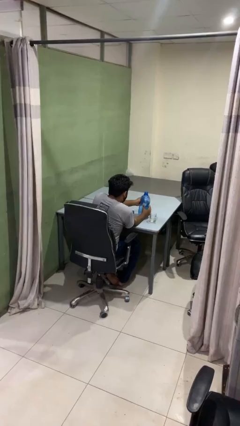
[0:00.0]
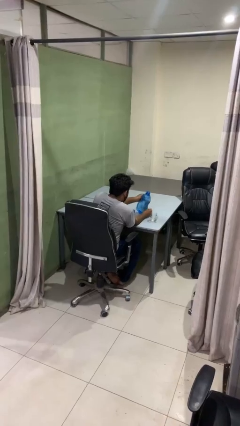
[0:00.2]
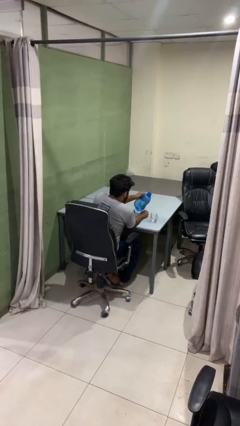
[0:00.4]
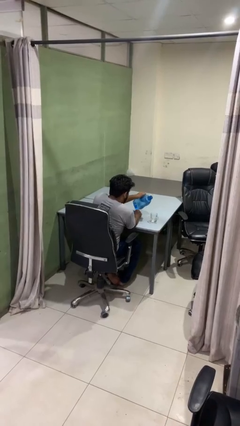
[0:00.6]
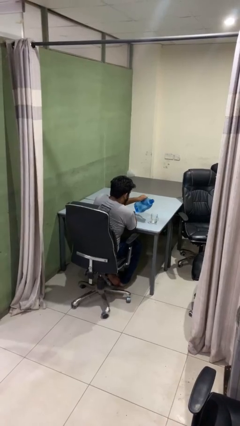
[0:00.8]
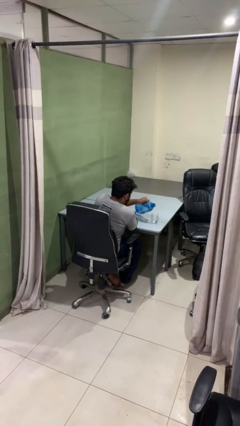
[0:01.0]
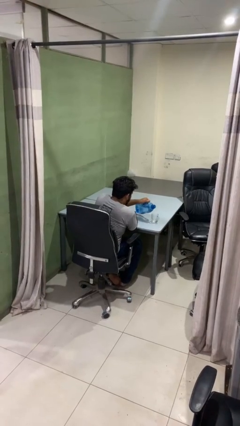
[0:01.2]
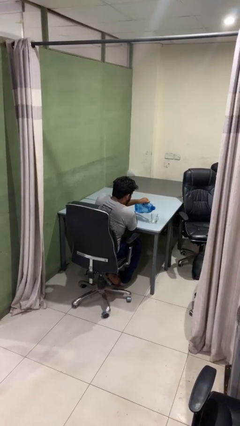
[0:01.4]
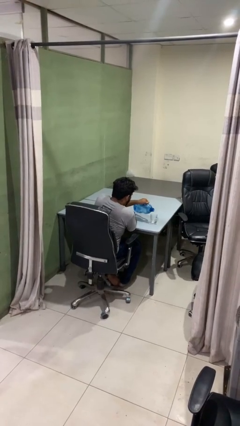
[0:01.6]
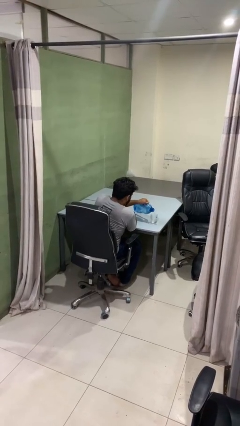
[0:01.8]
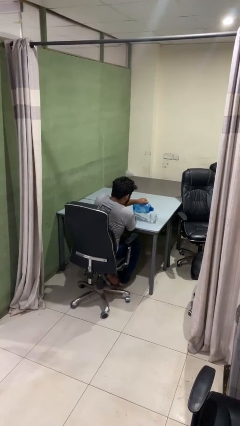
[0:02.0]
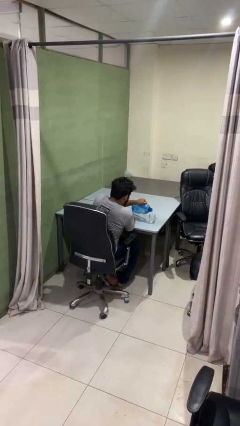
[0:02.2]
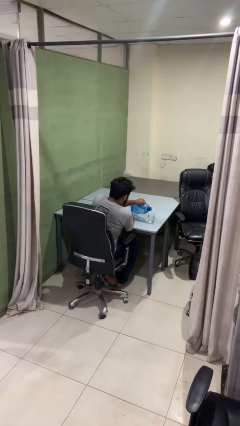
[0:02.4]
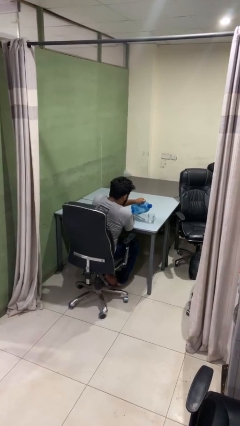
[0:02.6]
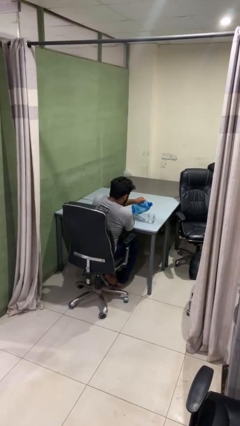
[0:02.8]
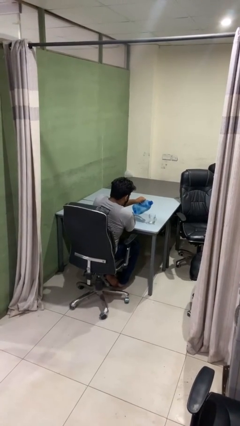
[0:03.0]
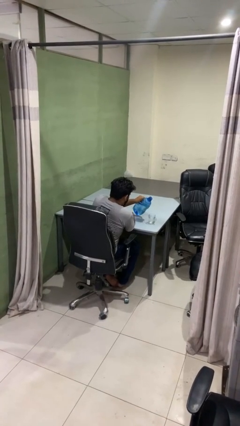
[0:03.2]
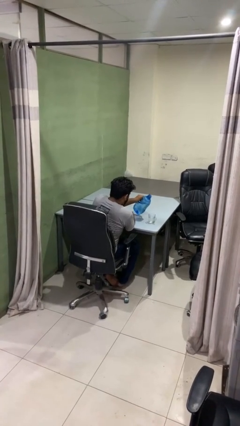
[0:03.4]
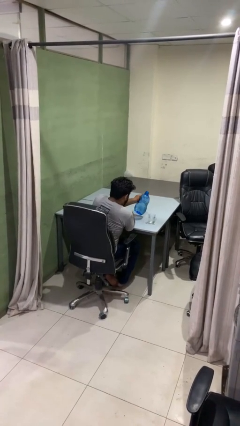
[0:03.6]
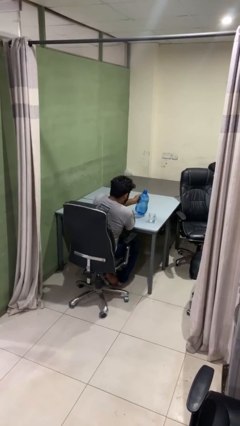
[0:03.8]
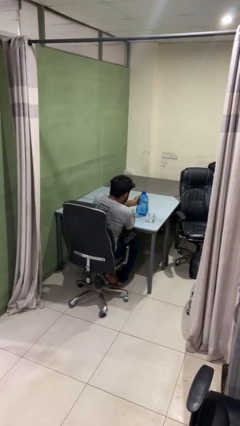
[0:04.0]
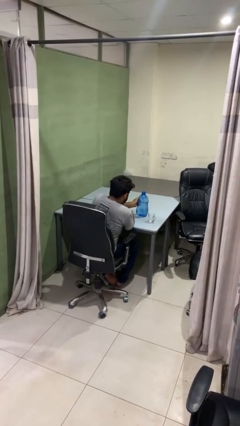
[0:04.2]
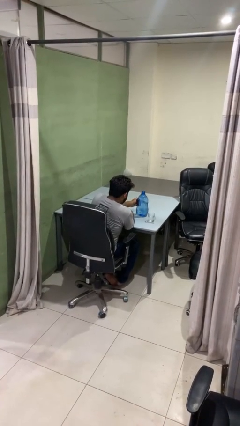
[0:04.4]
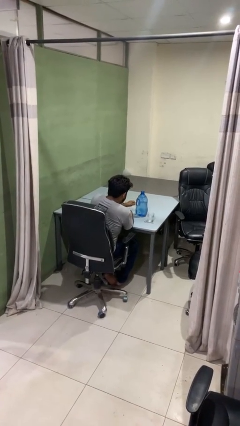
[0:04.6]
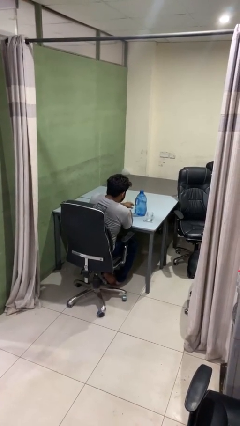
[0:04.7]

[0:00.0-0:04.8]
person pours liquid into cup

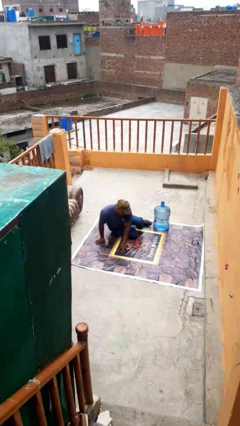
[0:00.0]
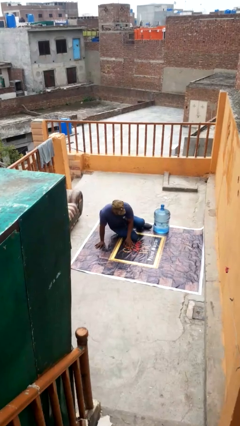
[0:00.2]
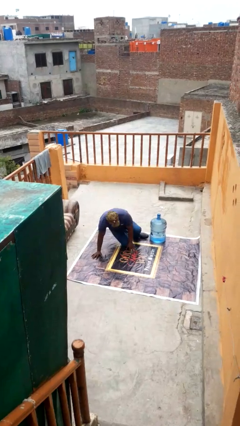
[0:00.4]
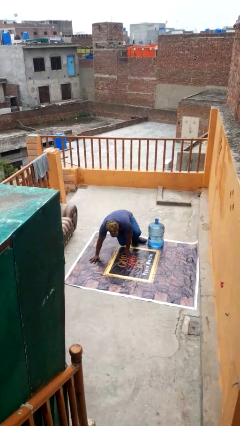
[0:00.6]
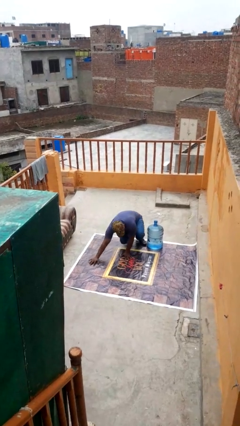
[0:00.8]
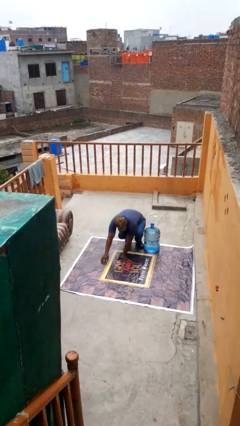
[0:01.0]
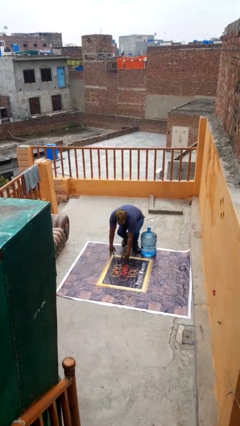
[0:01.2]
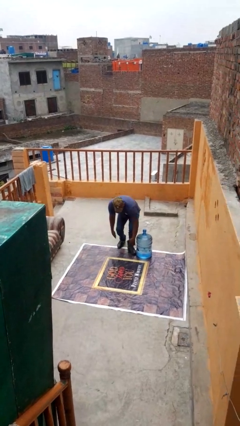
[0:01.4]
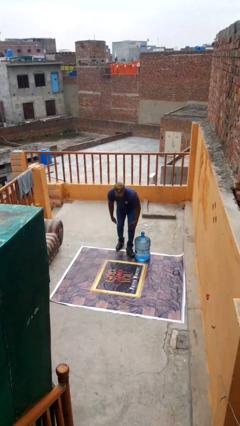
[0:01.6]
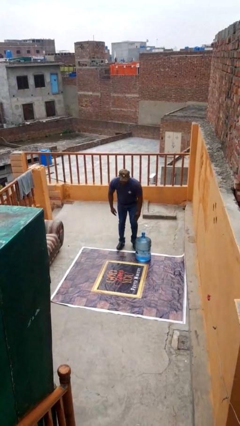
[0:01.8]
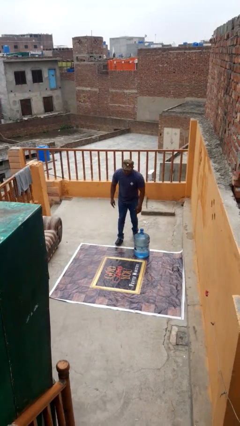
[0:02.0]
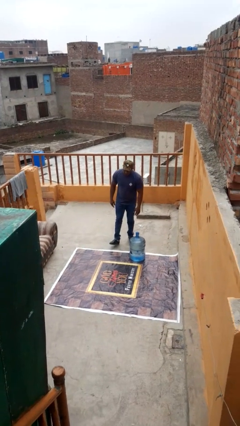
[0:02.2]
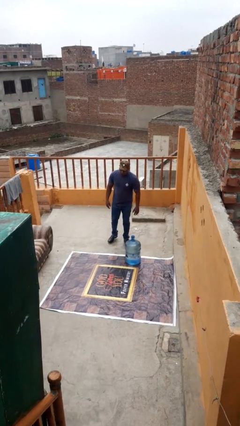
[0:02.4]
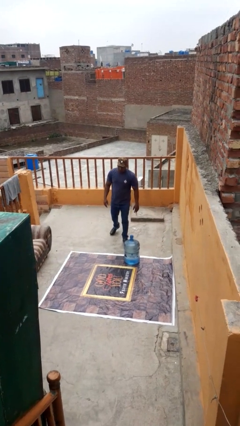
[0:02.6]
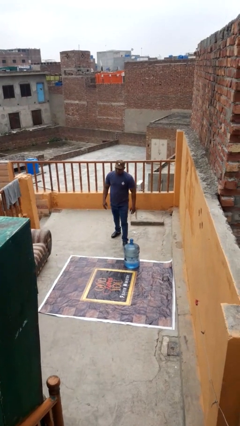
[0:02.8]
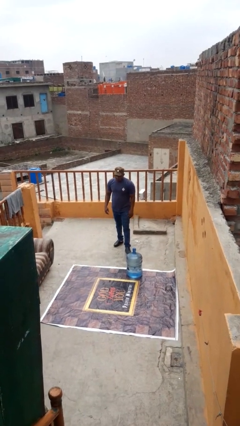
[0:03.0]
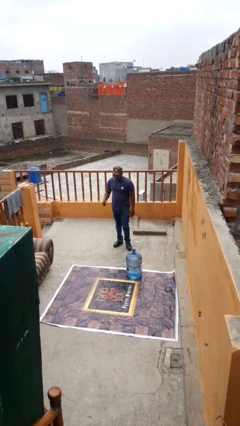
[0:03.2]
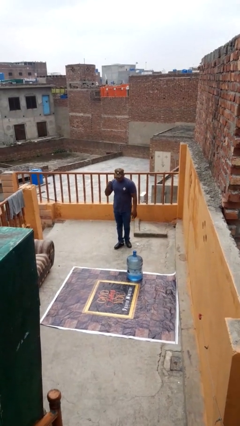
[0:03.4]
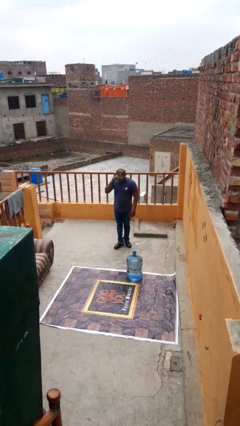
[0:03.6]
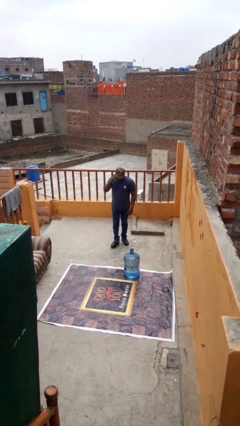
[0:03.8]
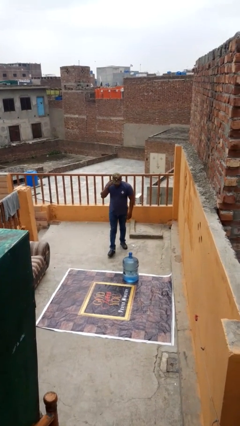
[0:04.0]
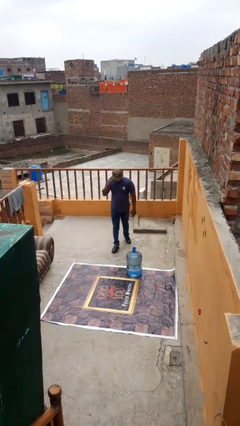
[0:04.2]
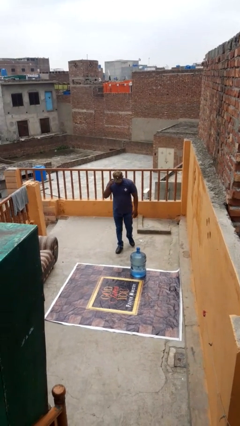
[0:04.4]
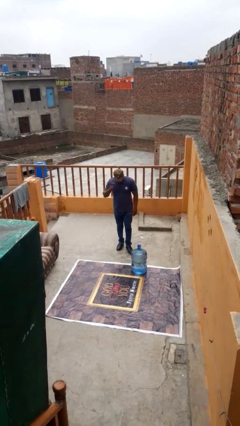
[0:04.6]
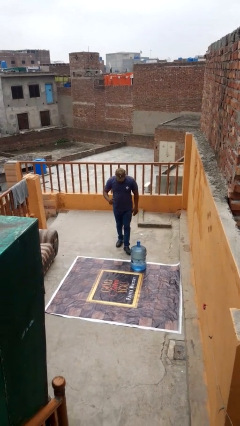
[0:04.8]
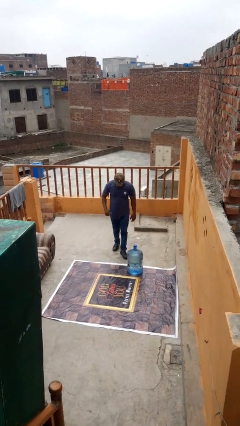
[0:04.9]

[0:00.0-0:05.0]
person stands up from floor

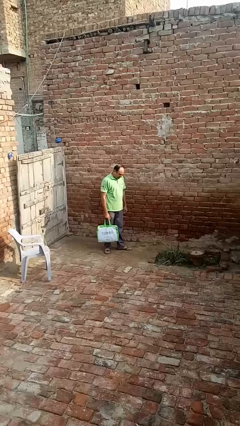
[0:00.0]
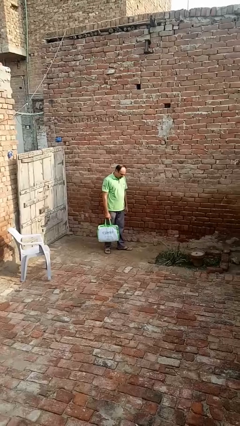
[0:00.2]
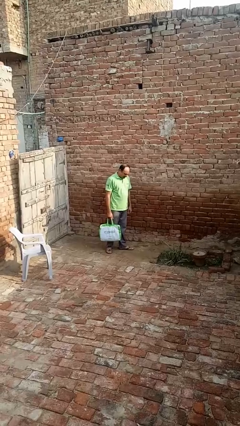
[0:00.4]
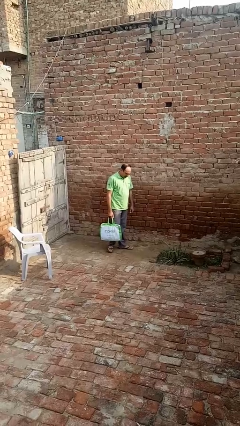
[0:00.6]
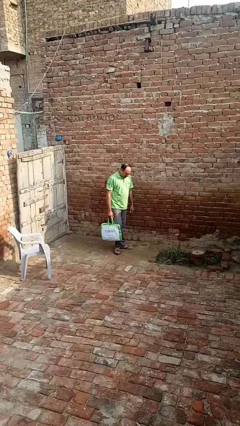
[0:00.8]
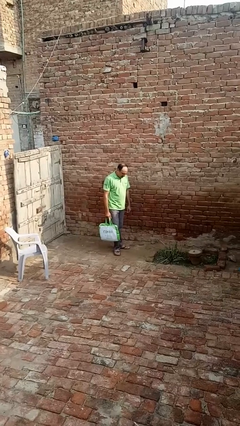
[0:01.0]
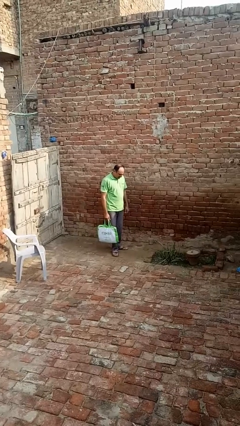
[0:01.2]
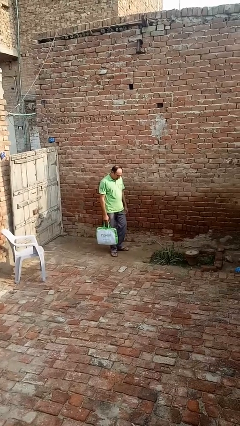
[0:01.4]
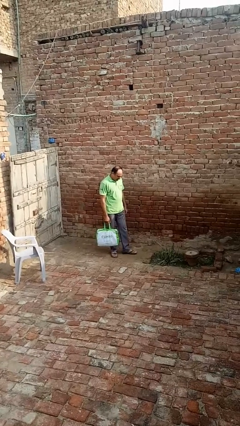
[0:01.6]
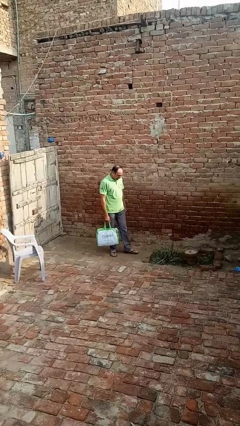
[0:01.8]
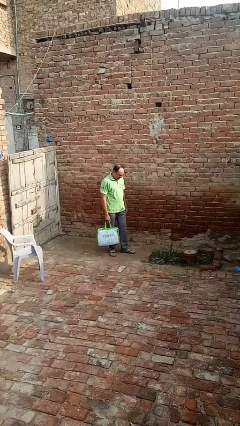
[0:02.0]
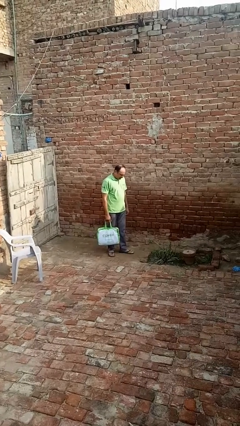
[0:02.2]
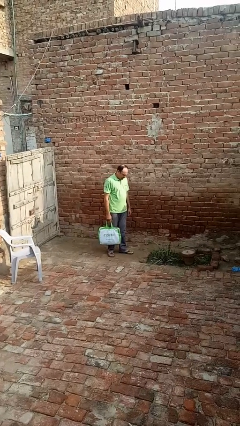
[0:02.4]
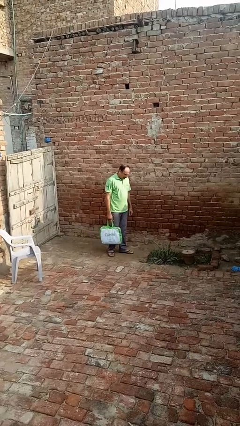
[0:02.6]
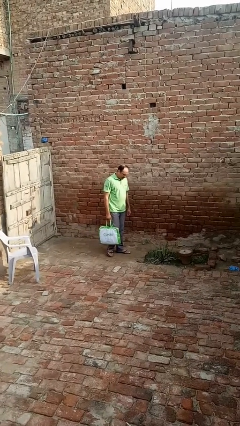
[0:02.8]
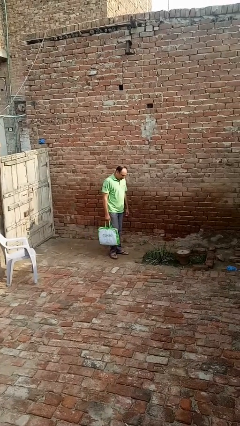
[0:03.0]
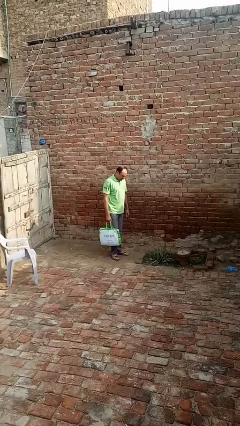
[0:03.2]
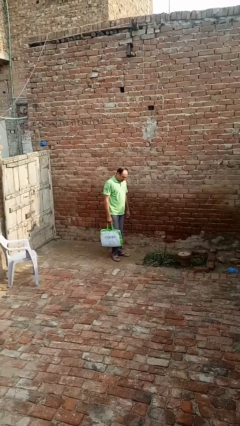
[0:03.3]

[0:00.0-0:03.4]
person carries groceries

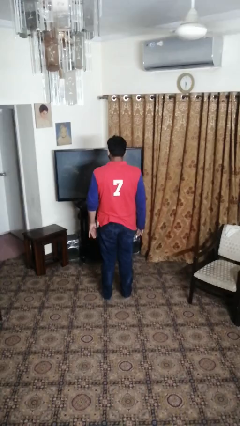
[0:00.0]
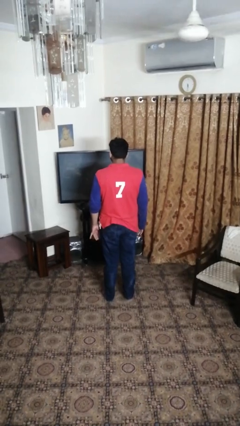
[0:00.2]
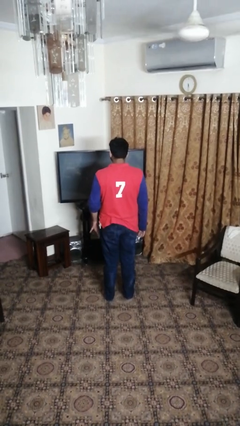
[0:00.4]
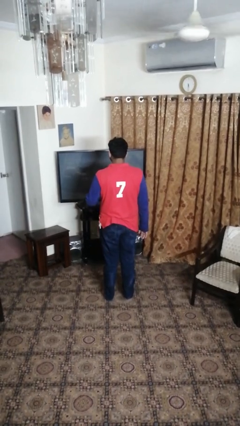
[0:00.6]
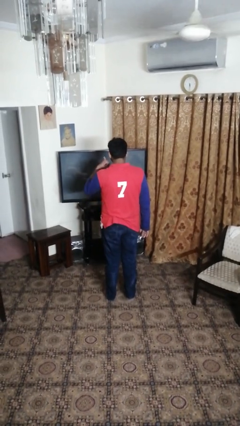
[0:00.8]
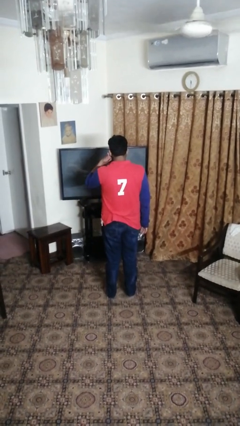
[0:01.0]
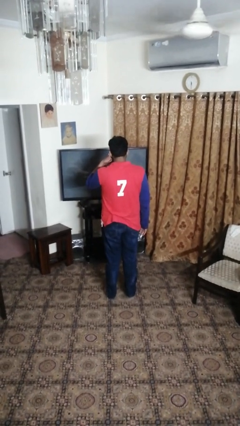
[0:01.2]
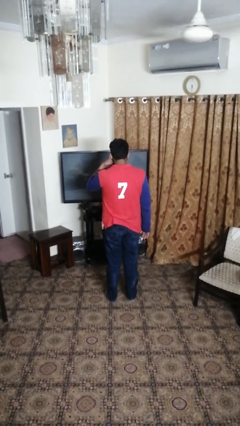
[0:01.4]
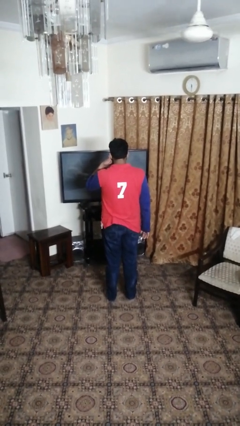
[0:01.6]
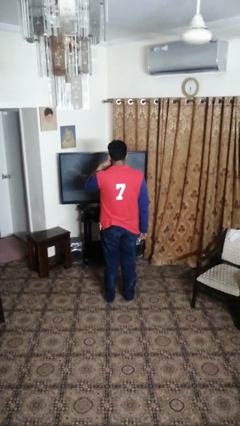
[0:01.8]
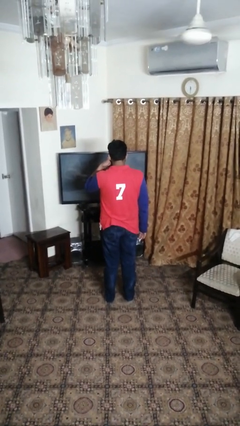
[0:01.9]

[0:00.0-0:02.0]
person gestures call me

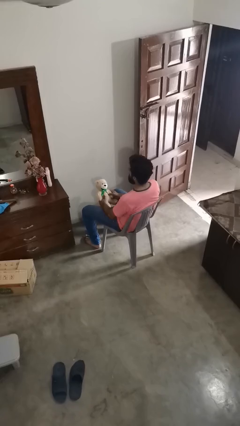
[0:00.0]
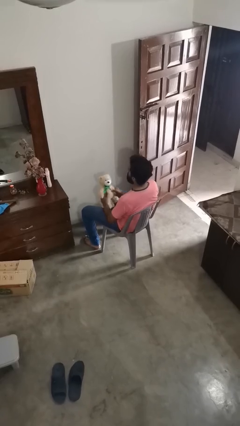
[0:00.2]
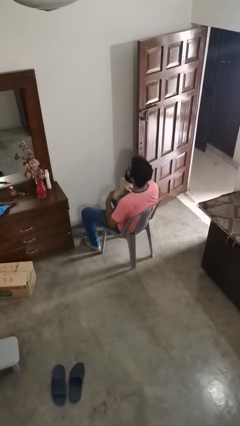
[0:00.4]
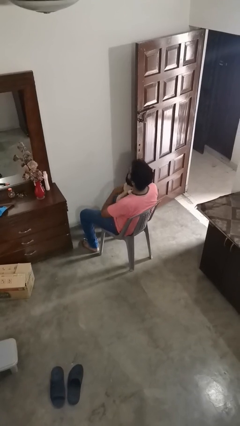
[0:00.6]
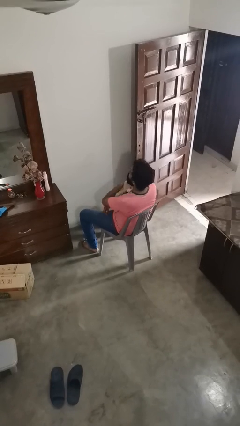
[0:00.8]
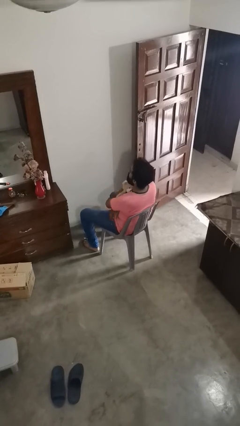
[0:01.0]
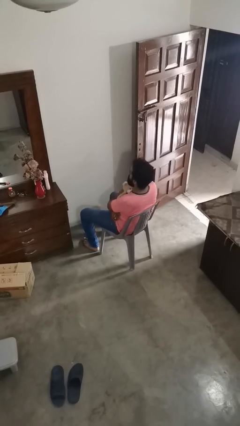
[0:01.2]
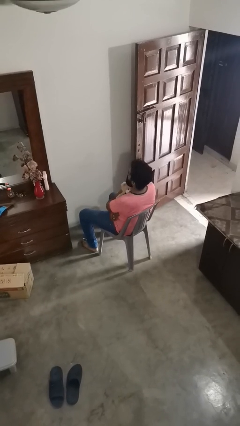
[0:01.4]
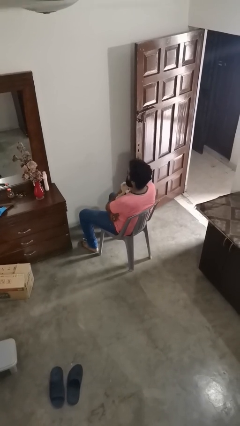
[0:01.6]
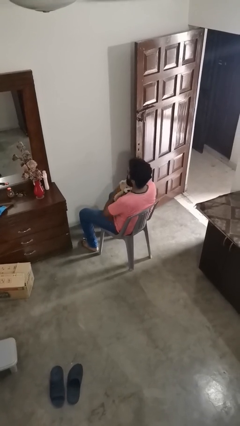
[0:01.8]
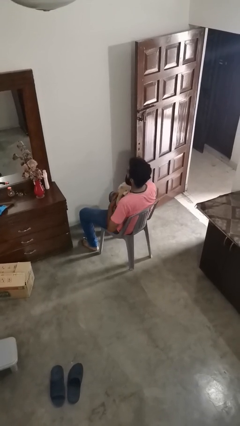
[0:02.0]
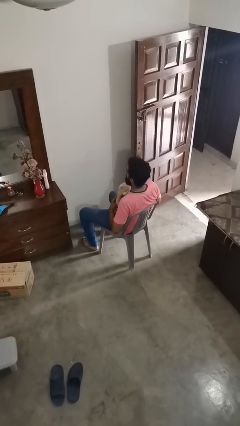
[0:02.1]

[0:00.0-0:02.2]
person hugs stuffed animal

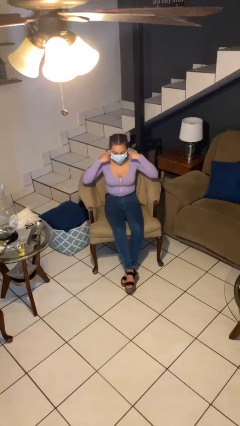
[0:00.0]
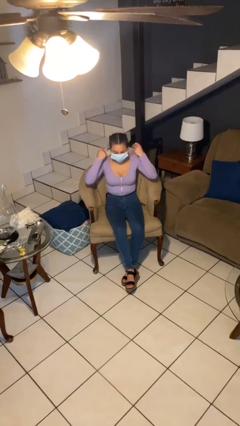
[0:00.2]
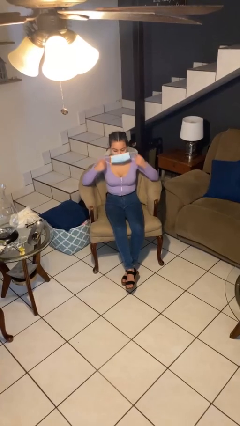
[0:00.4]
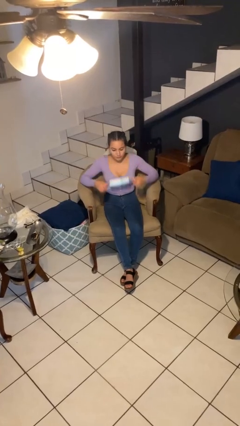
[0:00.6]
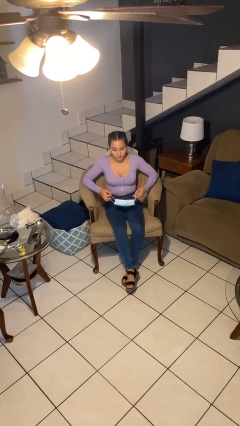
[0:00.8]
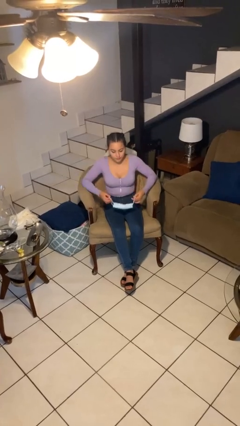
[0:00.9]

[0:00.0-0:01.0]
person takes off facemask
